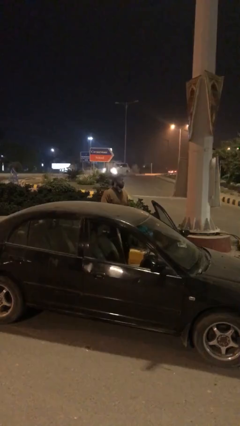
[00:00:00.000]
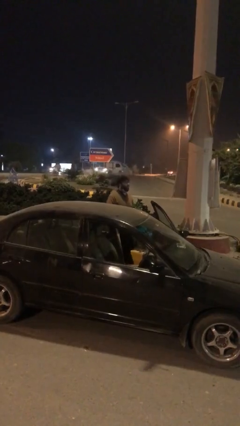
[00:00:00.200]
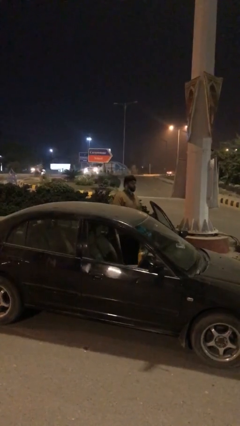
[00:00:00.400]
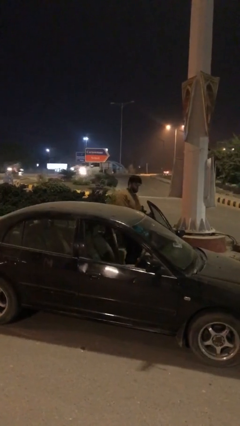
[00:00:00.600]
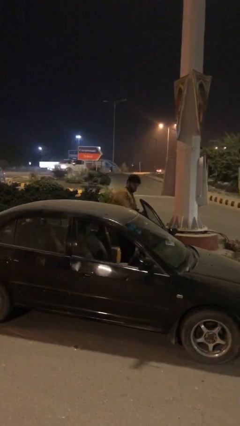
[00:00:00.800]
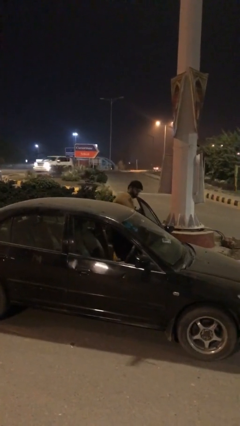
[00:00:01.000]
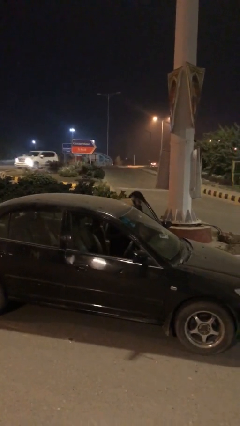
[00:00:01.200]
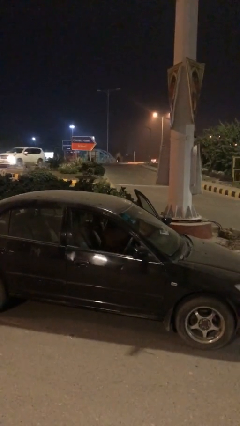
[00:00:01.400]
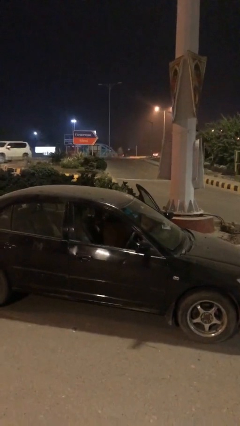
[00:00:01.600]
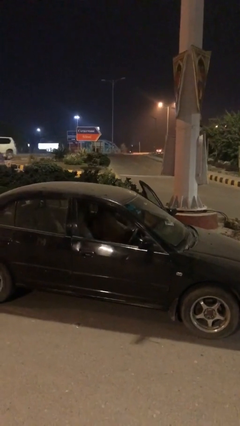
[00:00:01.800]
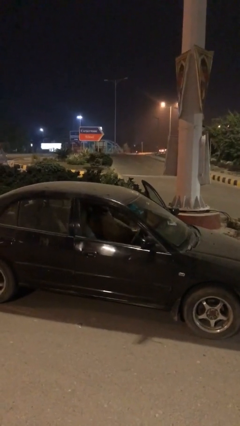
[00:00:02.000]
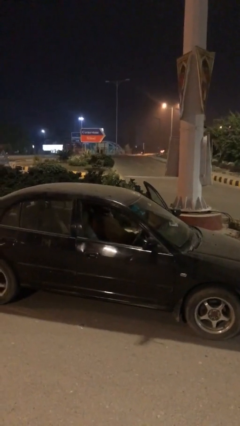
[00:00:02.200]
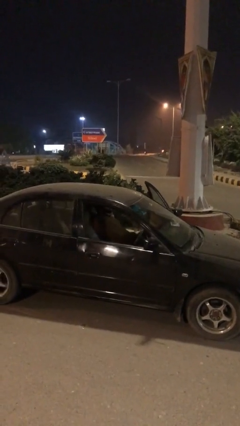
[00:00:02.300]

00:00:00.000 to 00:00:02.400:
person enters car

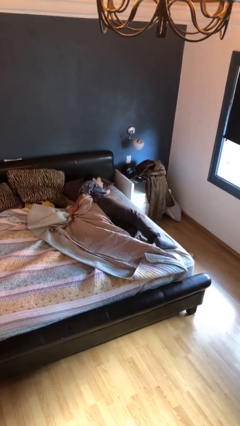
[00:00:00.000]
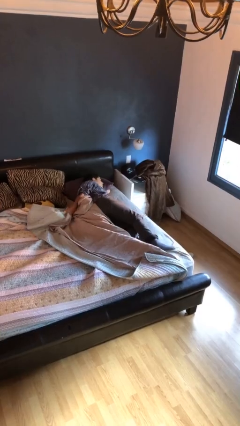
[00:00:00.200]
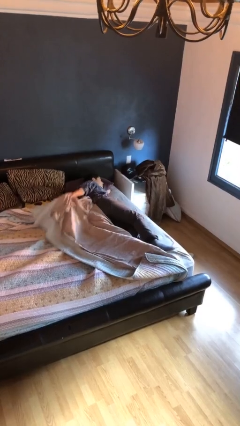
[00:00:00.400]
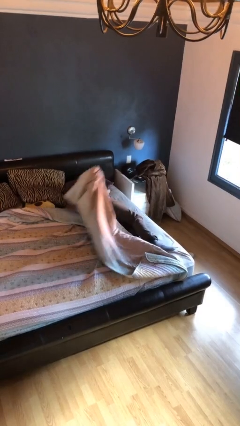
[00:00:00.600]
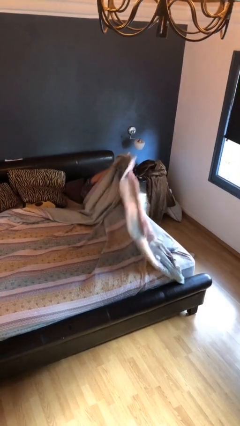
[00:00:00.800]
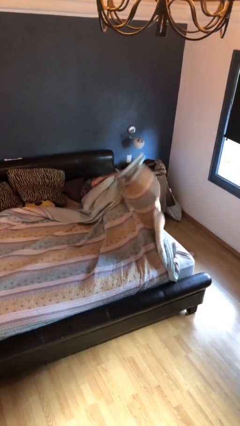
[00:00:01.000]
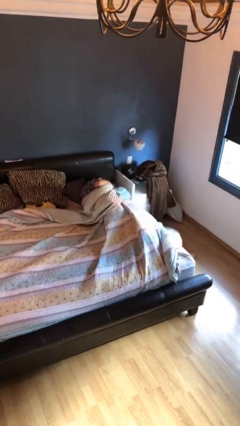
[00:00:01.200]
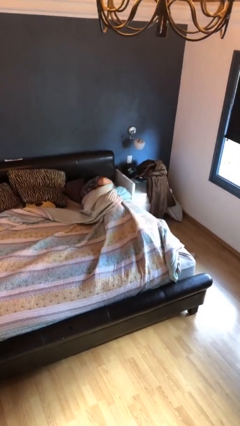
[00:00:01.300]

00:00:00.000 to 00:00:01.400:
person covers with bedsheets

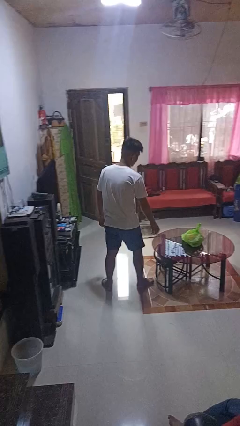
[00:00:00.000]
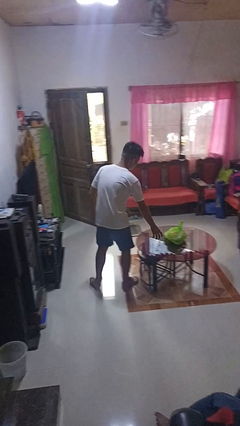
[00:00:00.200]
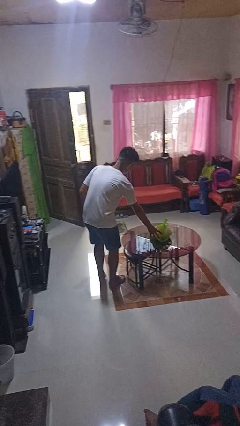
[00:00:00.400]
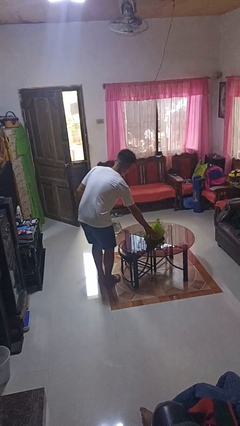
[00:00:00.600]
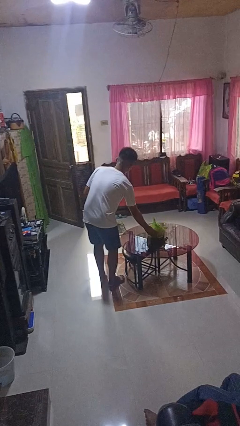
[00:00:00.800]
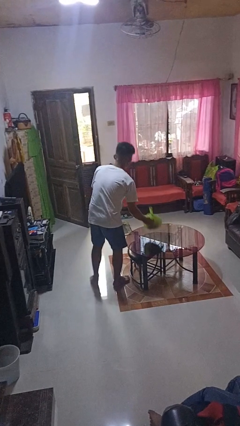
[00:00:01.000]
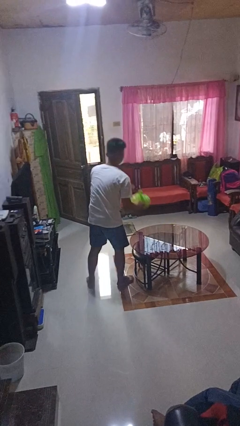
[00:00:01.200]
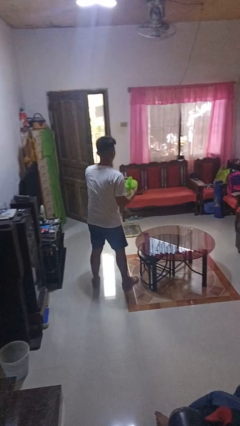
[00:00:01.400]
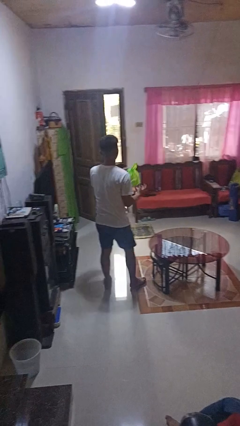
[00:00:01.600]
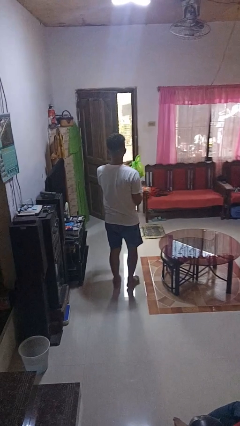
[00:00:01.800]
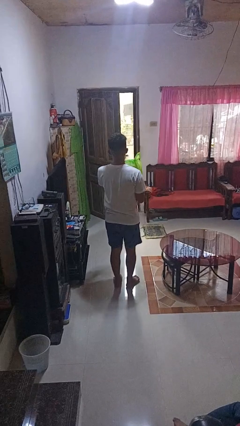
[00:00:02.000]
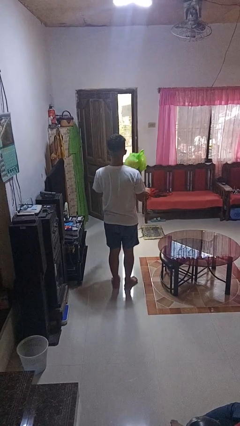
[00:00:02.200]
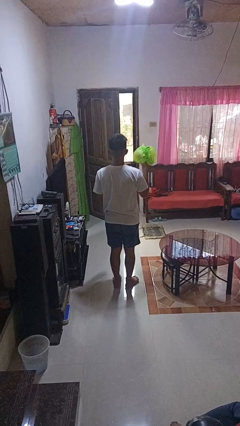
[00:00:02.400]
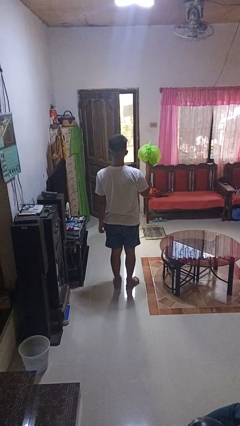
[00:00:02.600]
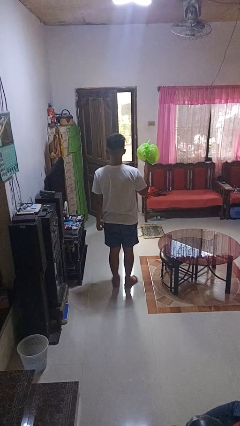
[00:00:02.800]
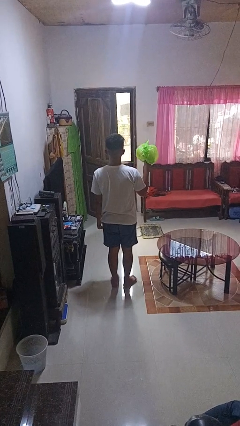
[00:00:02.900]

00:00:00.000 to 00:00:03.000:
person picks up object from table

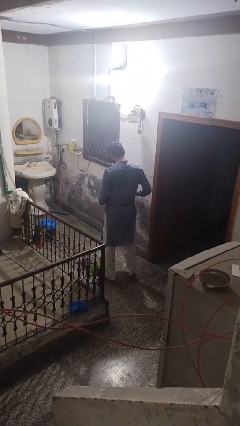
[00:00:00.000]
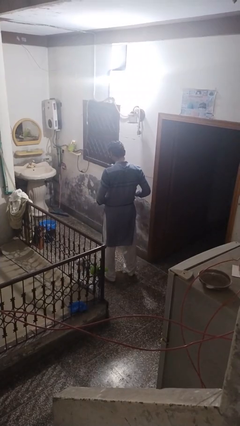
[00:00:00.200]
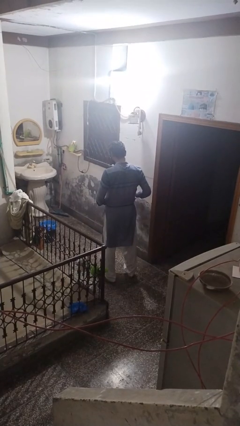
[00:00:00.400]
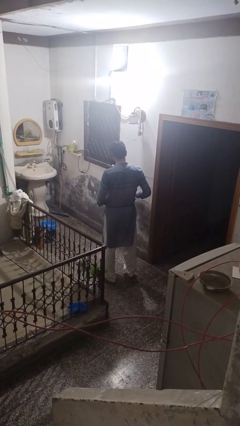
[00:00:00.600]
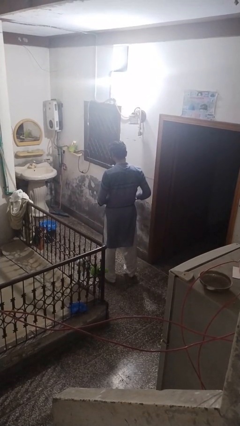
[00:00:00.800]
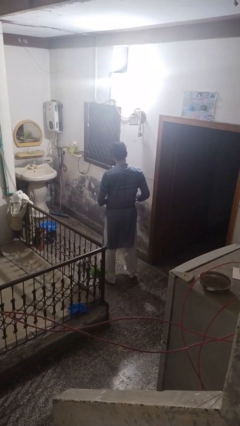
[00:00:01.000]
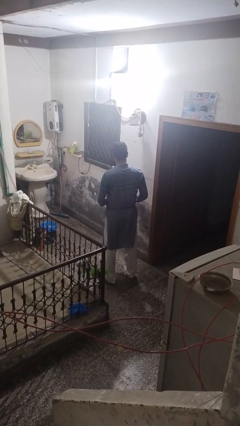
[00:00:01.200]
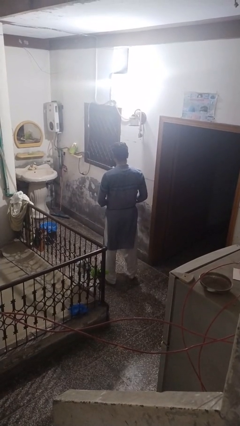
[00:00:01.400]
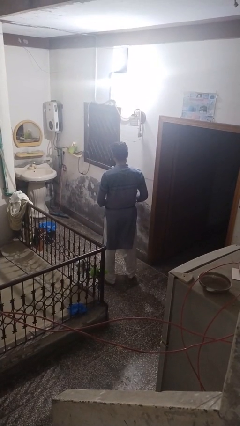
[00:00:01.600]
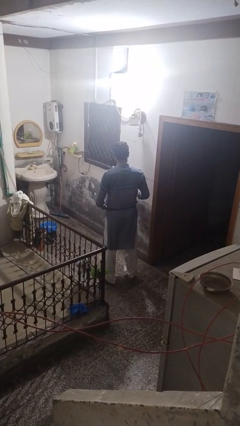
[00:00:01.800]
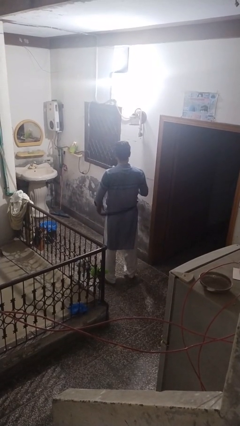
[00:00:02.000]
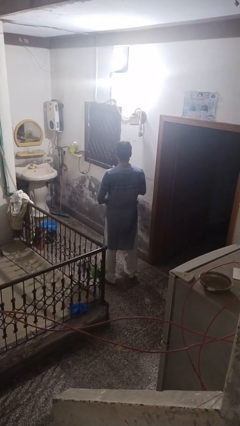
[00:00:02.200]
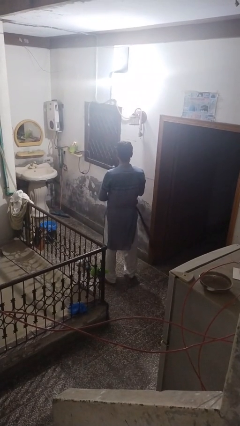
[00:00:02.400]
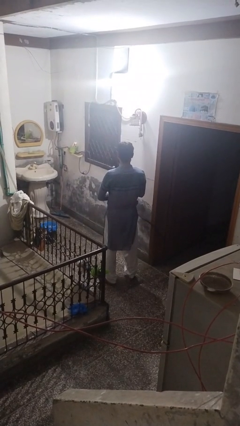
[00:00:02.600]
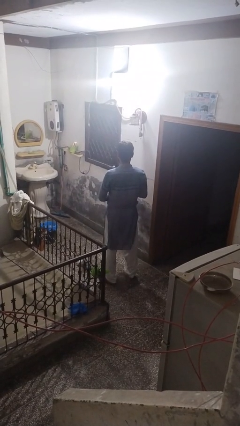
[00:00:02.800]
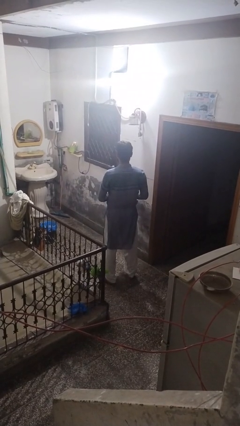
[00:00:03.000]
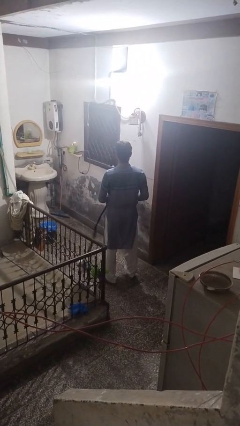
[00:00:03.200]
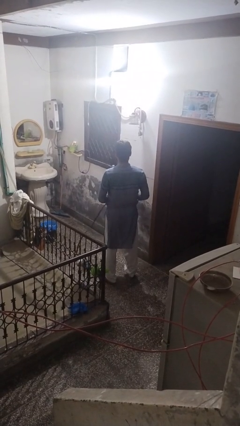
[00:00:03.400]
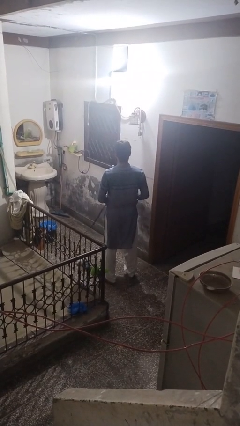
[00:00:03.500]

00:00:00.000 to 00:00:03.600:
person takes off belt

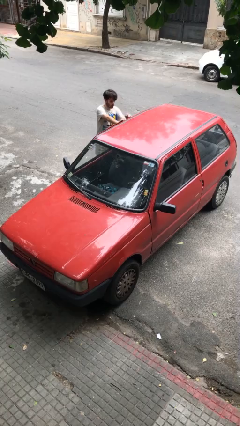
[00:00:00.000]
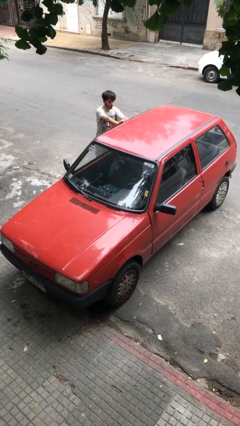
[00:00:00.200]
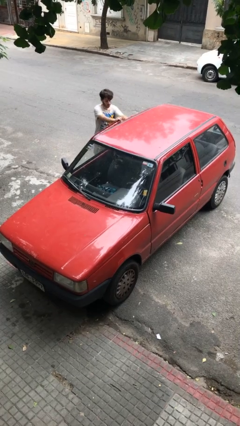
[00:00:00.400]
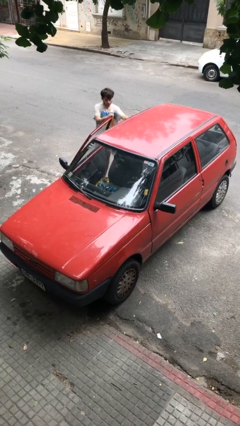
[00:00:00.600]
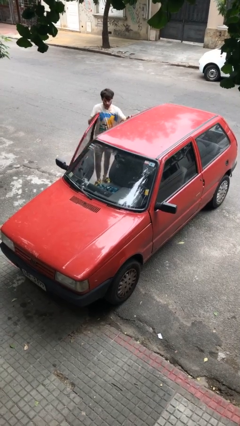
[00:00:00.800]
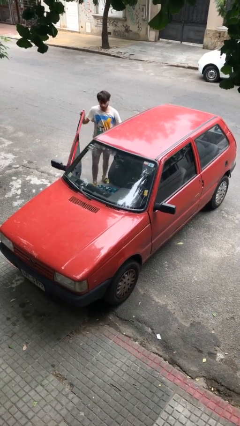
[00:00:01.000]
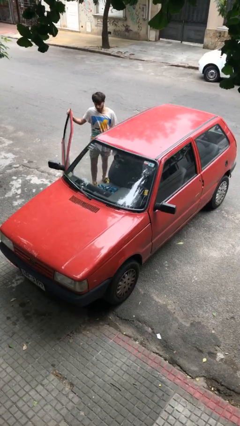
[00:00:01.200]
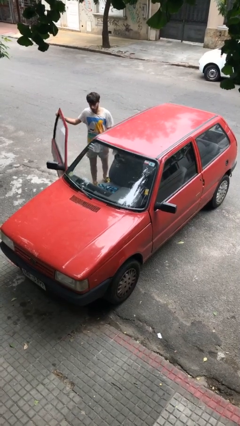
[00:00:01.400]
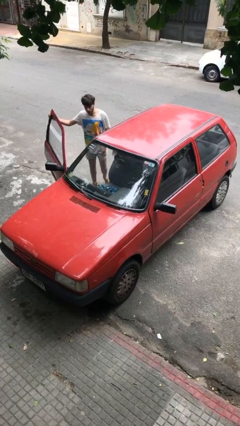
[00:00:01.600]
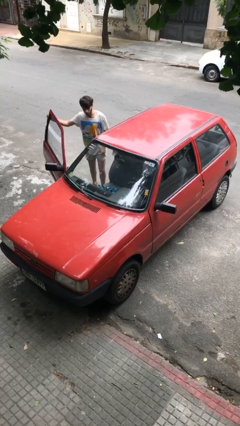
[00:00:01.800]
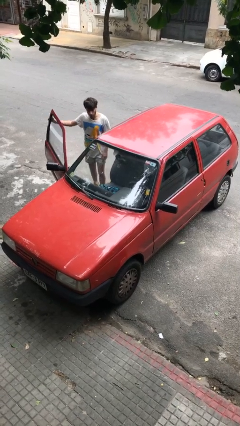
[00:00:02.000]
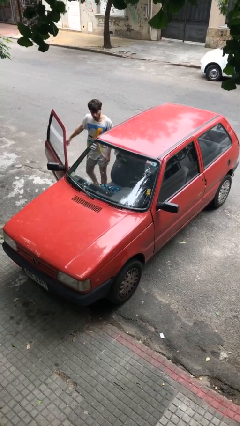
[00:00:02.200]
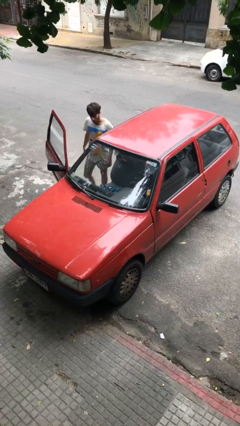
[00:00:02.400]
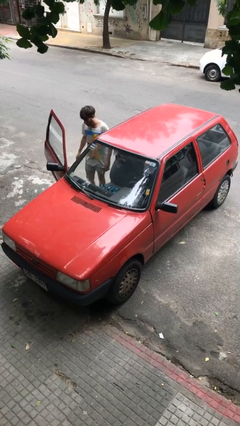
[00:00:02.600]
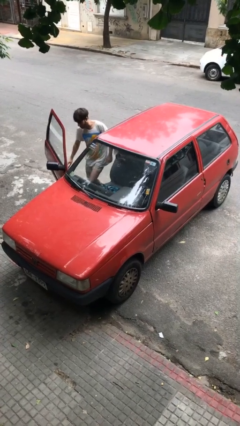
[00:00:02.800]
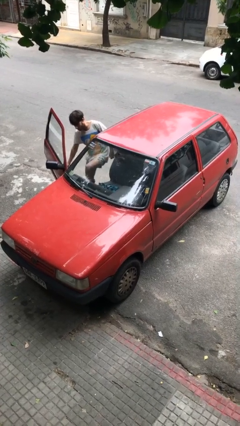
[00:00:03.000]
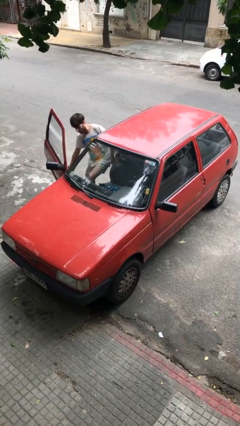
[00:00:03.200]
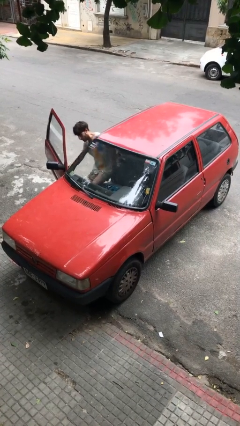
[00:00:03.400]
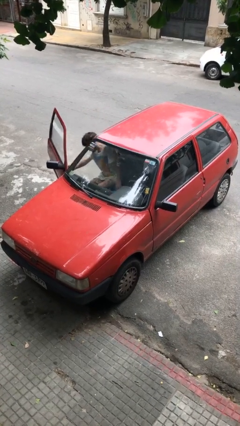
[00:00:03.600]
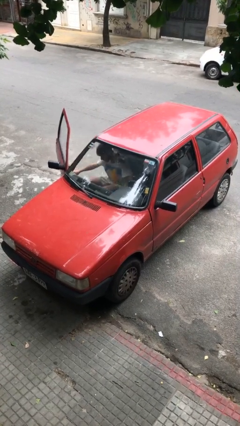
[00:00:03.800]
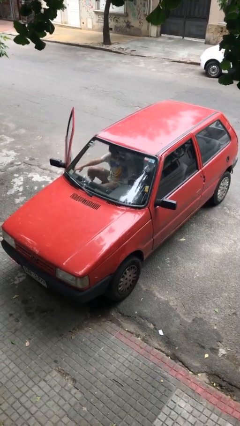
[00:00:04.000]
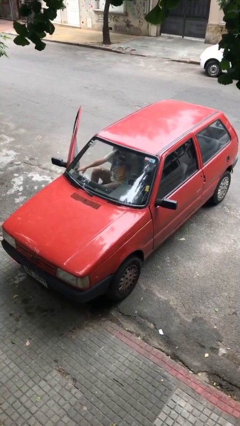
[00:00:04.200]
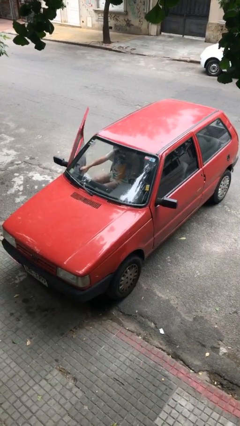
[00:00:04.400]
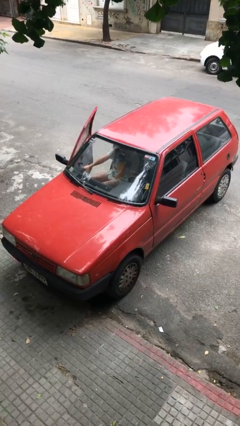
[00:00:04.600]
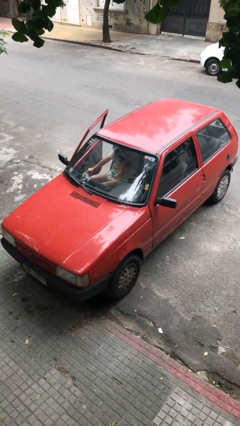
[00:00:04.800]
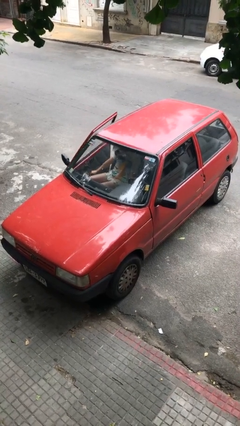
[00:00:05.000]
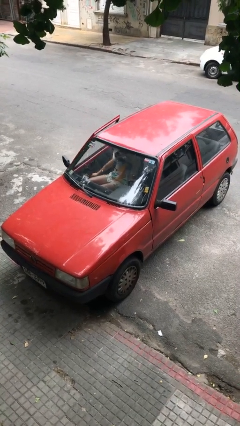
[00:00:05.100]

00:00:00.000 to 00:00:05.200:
car picks up person

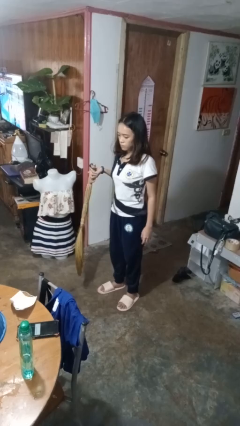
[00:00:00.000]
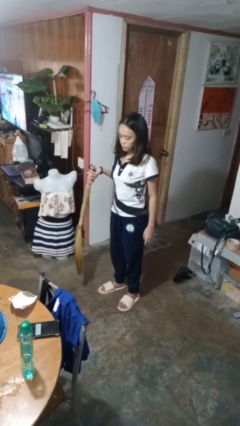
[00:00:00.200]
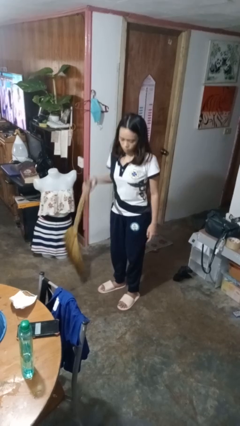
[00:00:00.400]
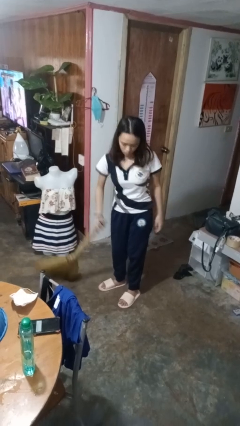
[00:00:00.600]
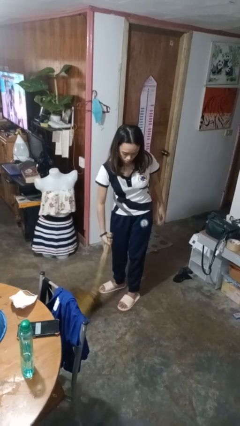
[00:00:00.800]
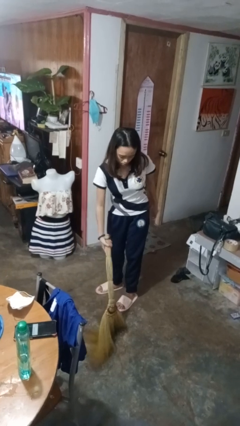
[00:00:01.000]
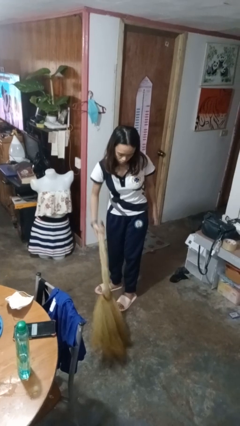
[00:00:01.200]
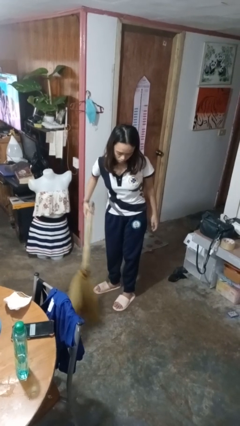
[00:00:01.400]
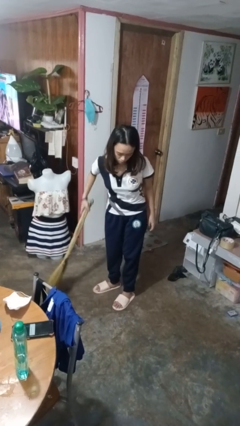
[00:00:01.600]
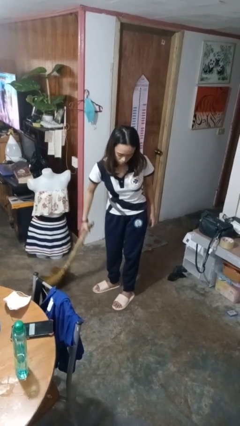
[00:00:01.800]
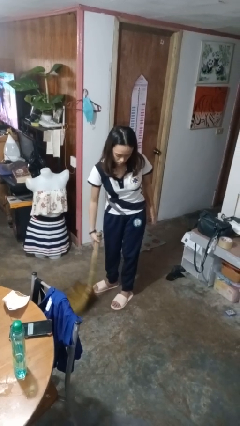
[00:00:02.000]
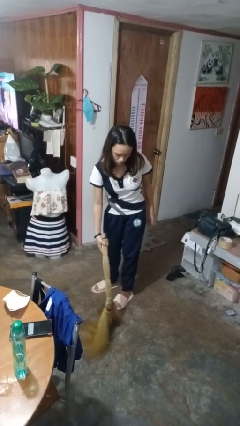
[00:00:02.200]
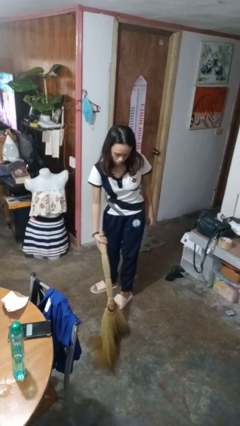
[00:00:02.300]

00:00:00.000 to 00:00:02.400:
person sweeps floor
